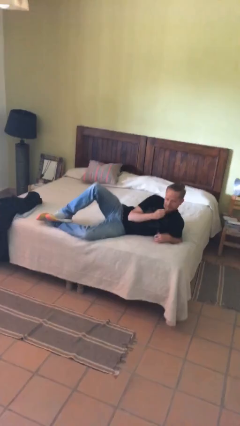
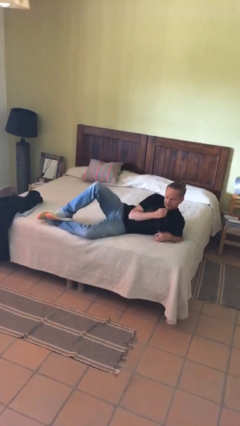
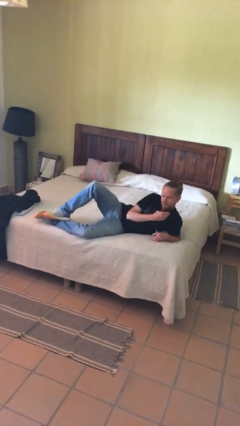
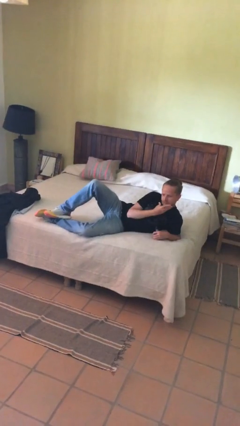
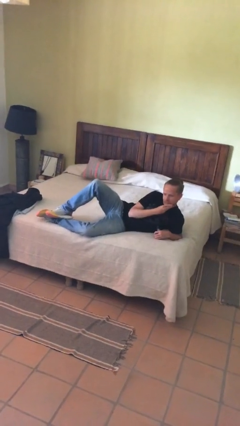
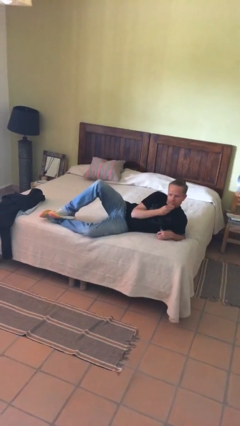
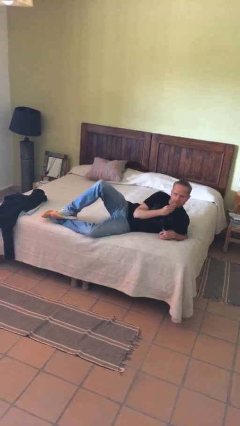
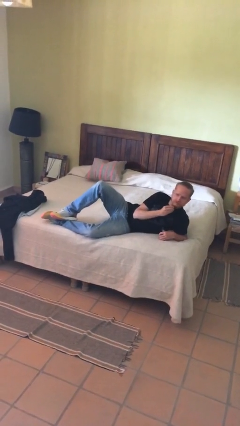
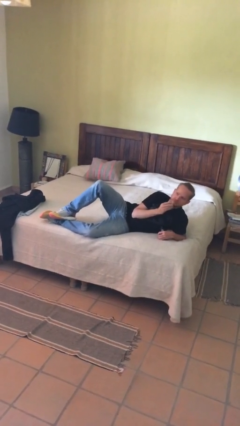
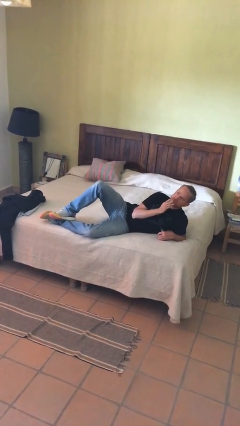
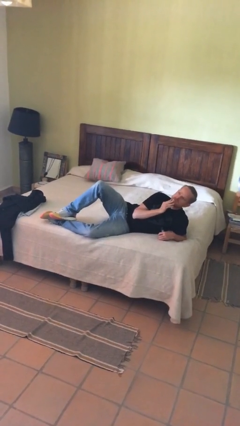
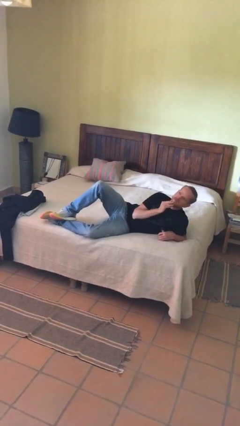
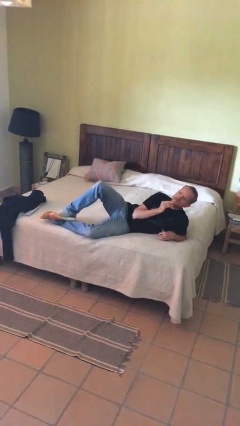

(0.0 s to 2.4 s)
person strokes chin

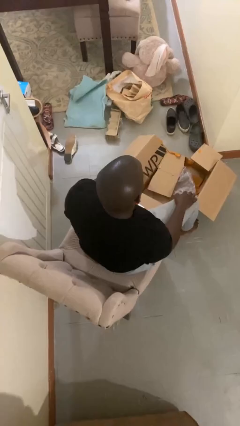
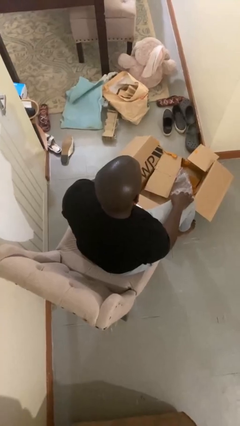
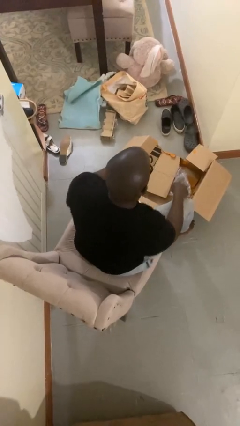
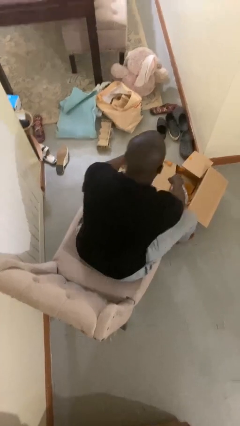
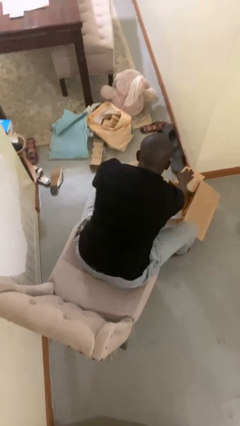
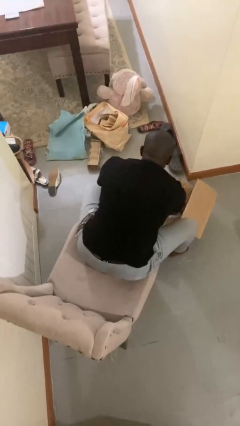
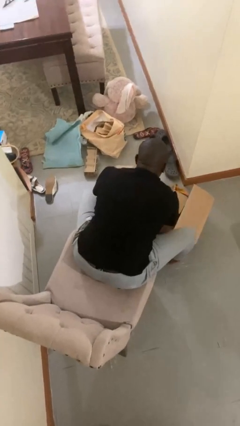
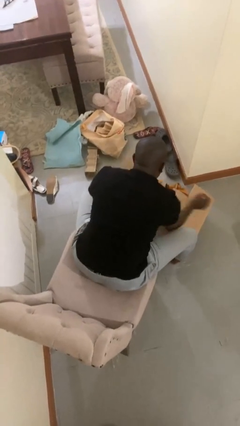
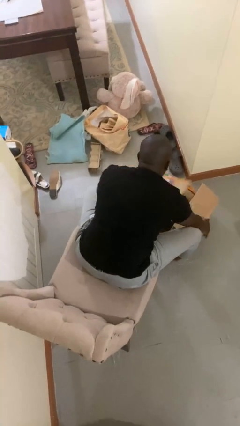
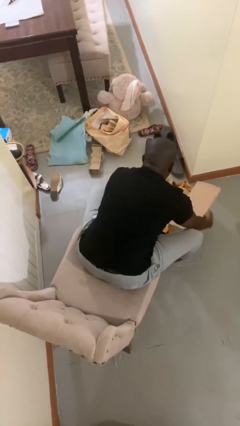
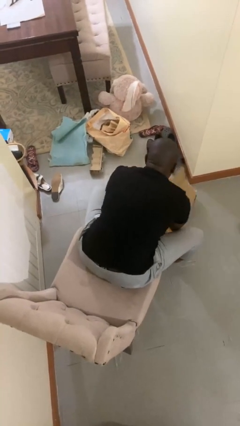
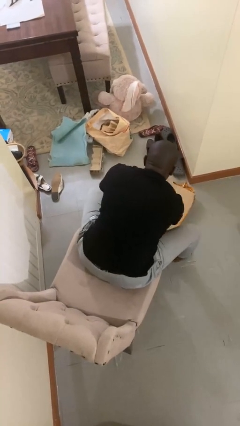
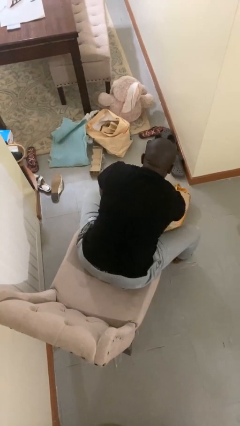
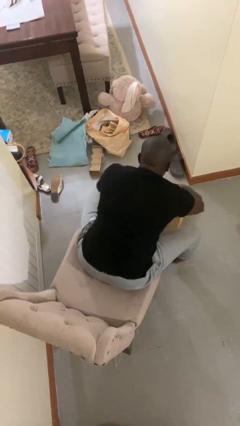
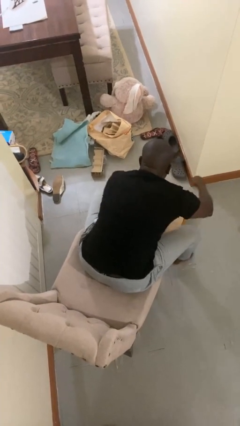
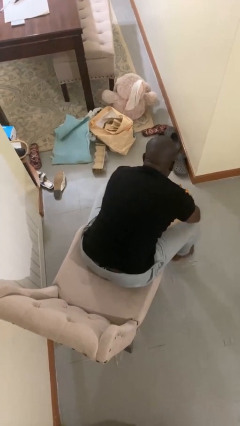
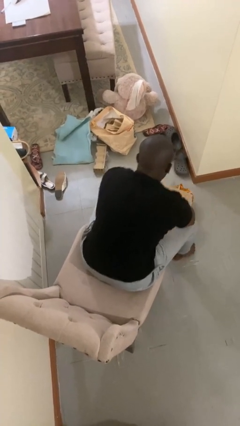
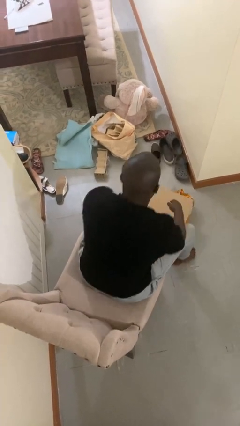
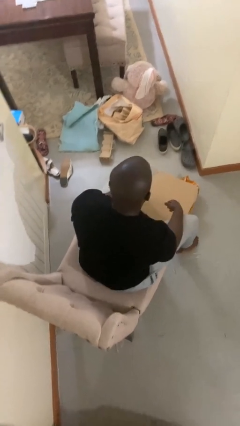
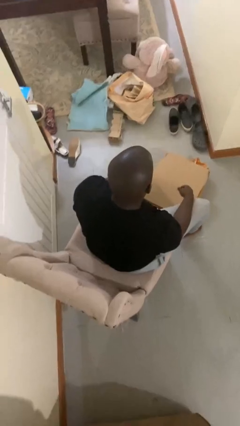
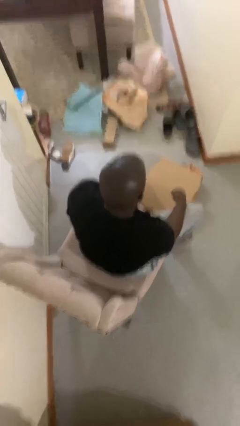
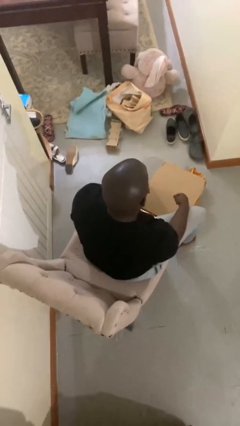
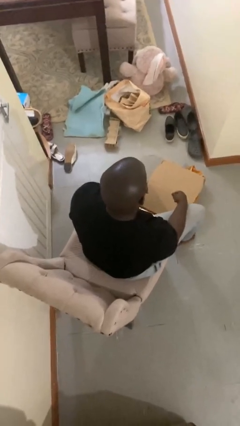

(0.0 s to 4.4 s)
person closes box

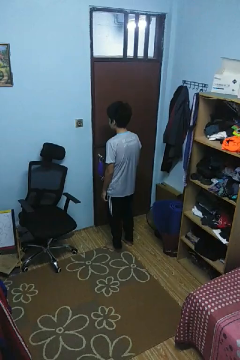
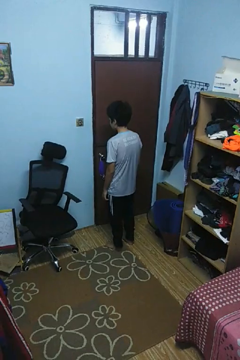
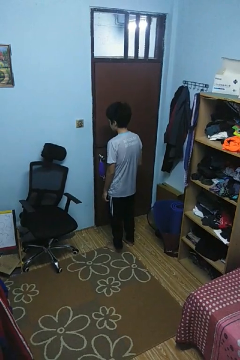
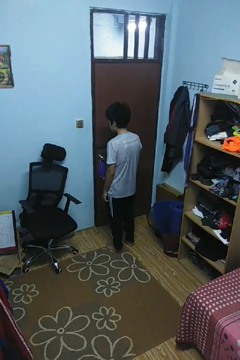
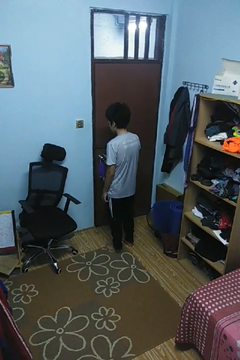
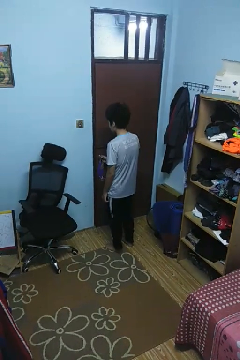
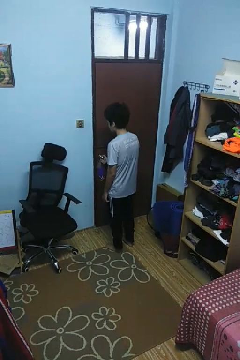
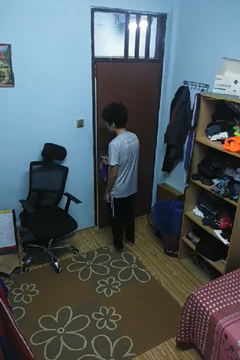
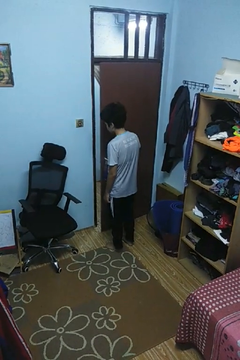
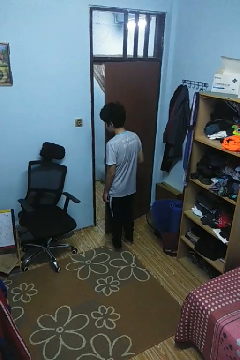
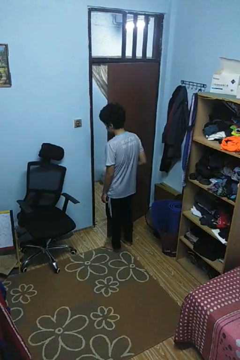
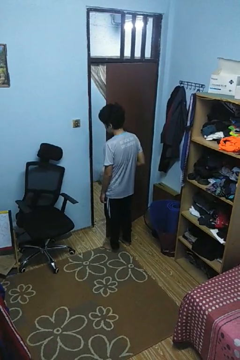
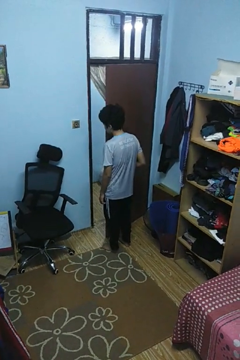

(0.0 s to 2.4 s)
person opens facility door

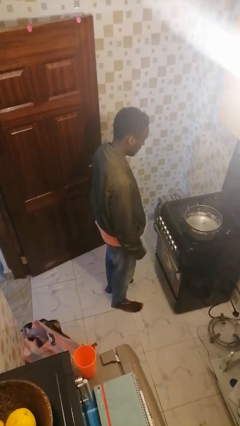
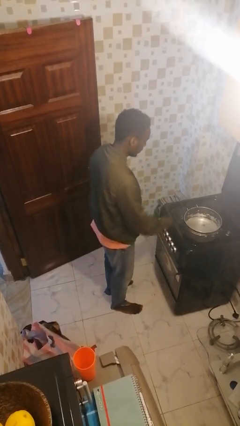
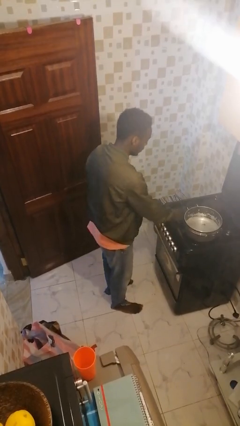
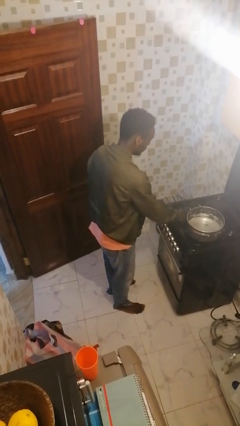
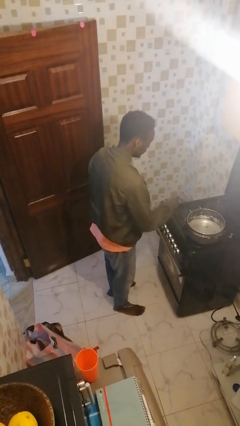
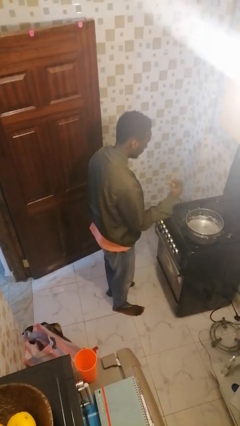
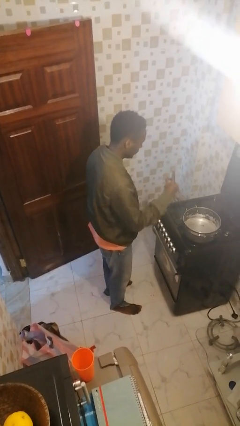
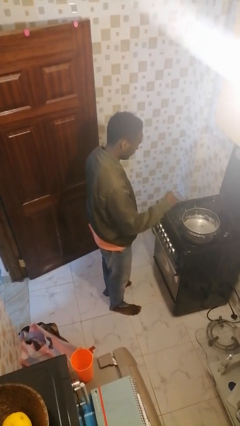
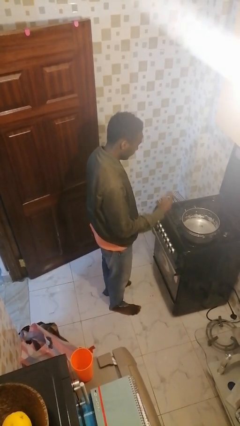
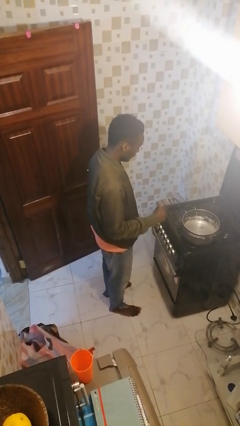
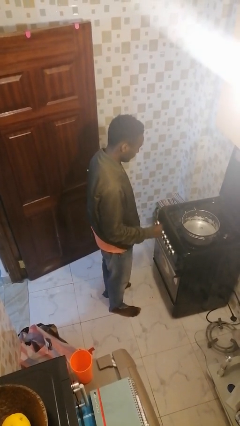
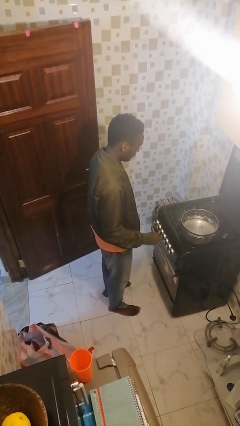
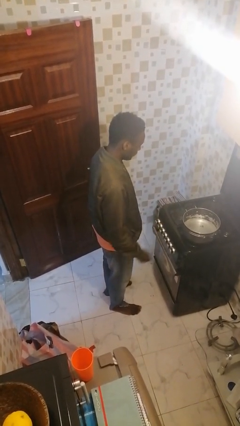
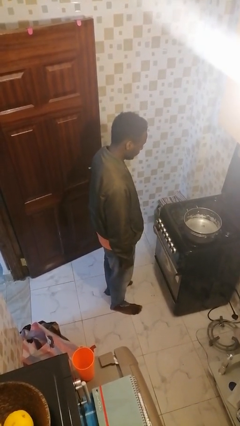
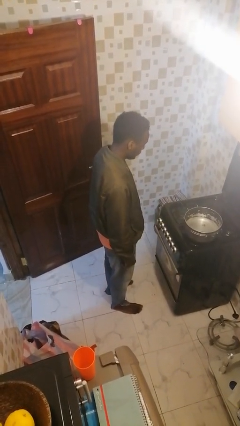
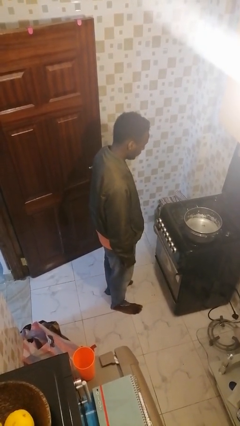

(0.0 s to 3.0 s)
person burns hand

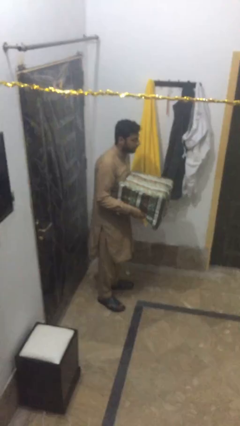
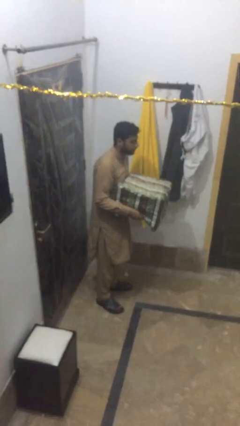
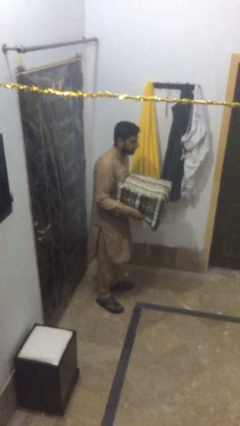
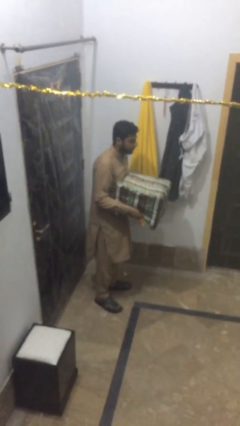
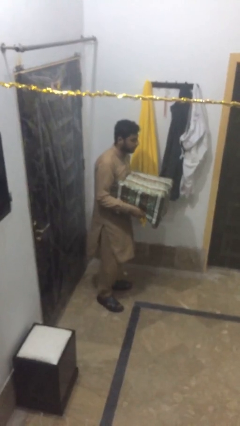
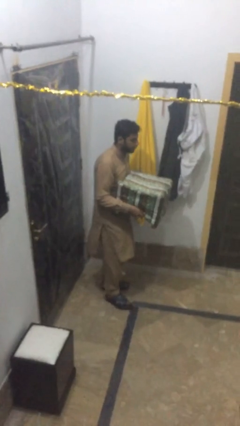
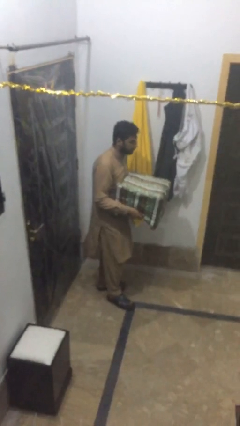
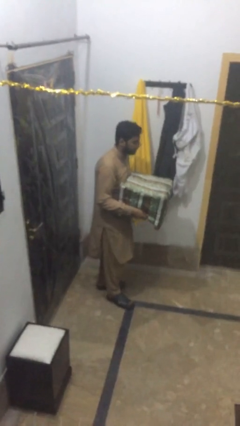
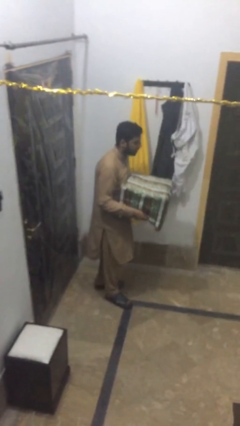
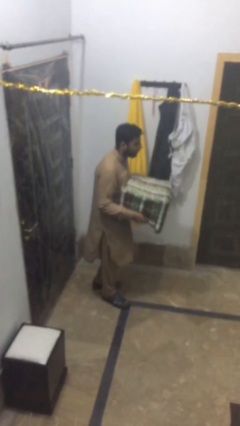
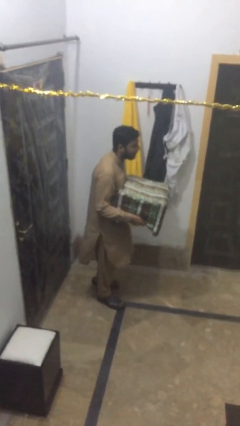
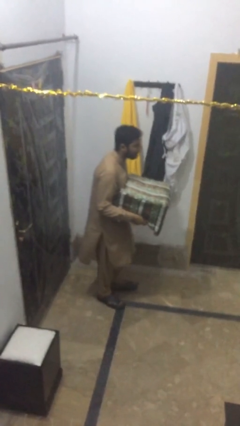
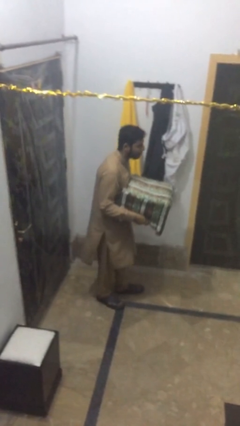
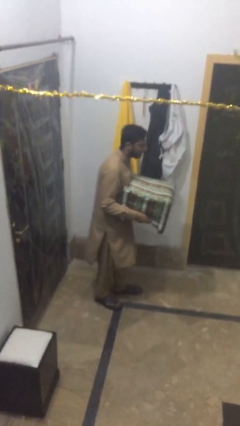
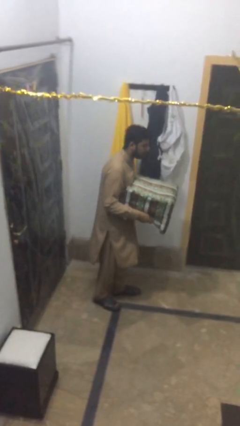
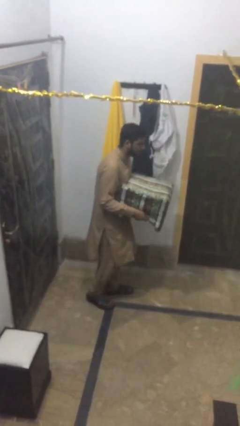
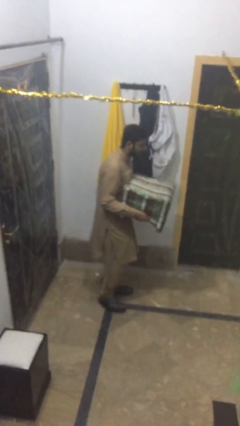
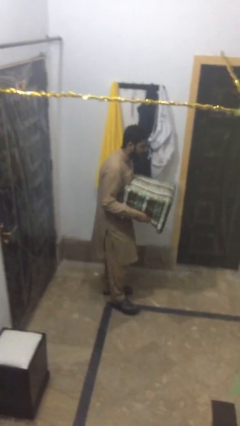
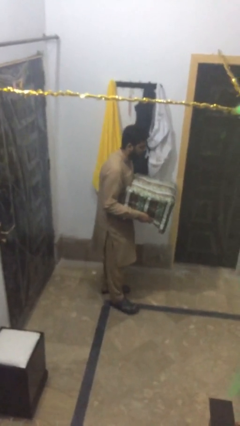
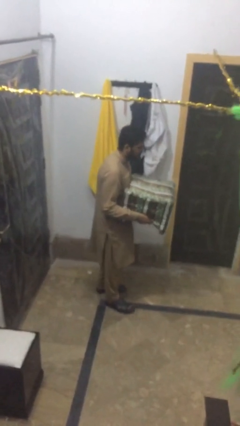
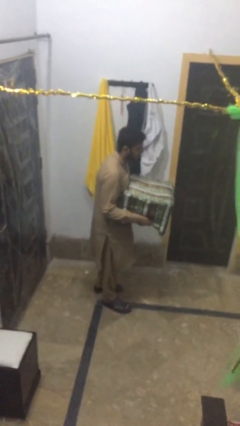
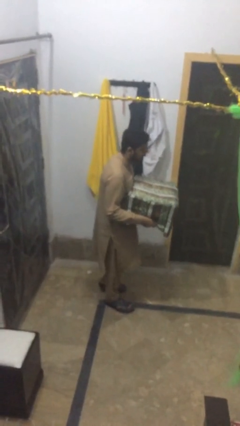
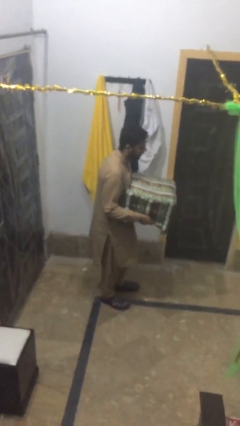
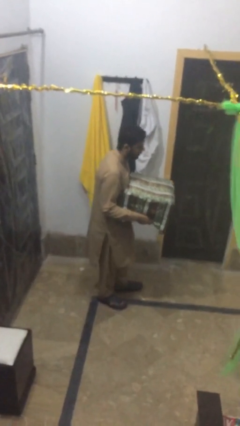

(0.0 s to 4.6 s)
person carries heavy object

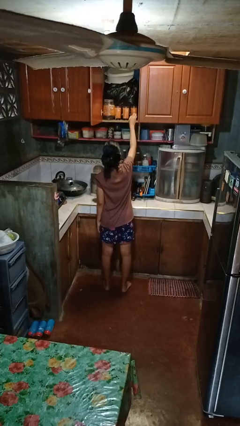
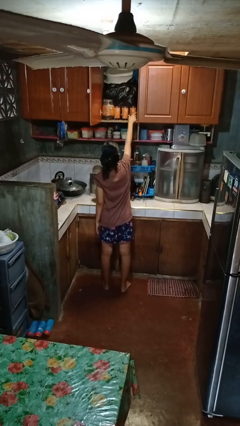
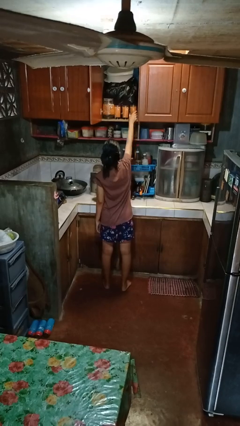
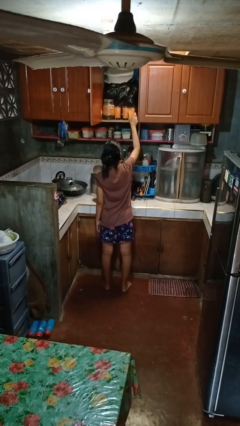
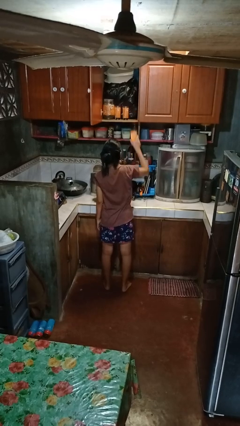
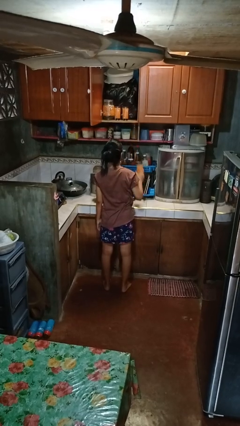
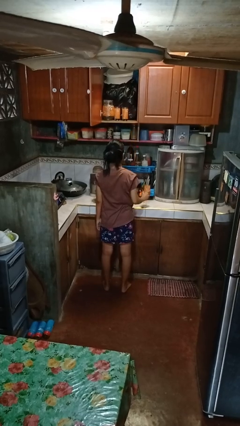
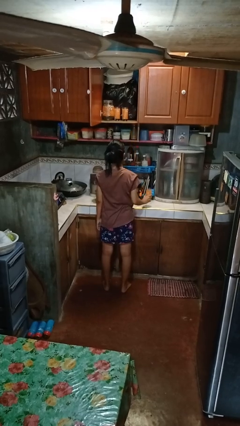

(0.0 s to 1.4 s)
person takes object from cabinet
